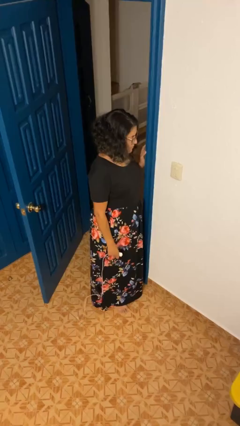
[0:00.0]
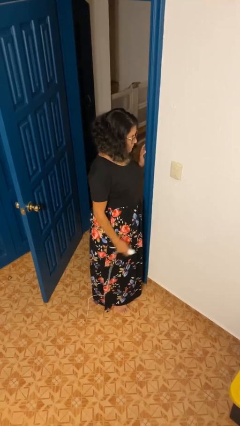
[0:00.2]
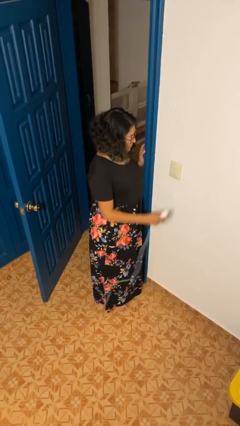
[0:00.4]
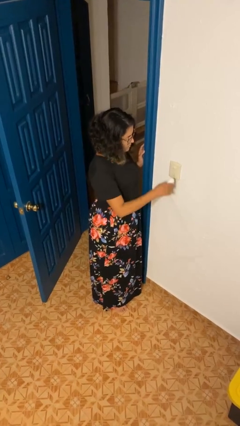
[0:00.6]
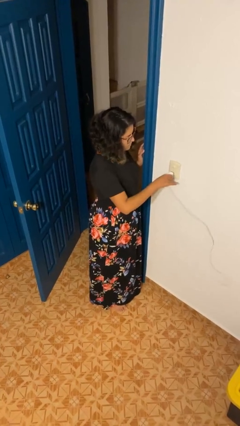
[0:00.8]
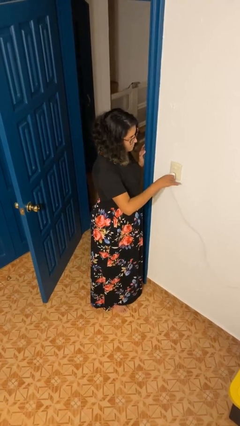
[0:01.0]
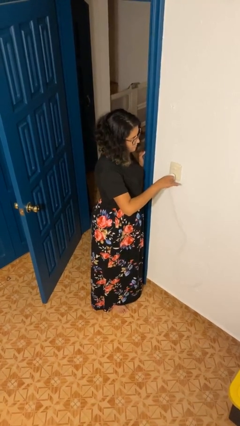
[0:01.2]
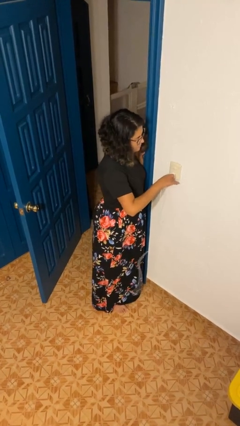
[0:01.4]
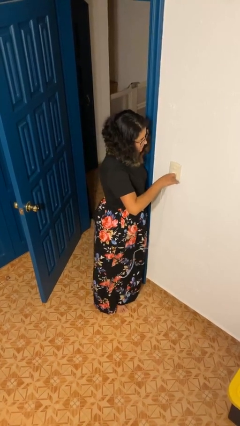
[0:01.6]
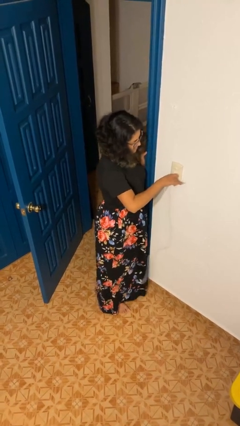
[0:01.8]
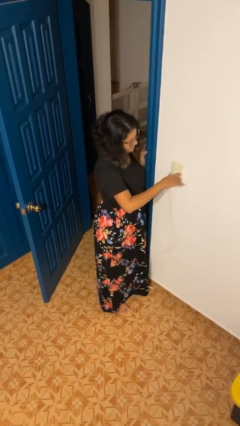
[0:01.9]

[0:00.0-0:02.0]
person plugs into electrical socket

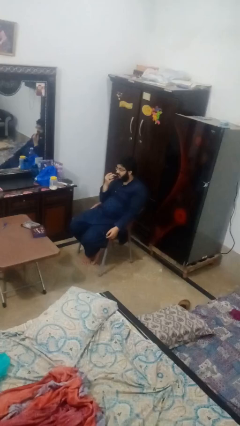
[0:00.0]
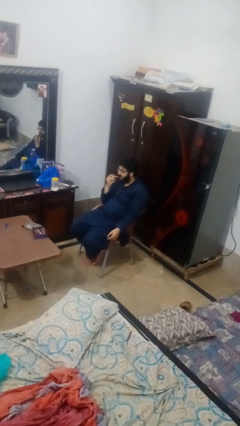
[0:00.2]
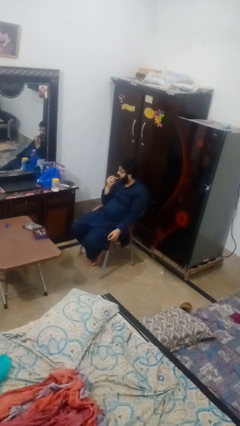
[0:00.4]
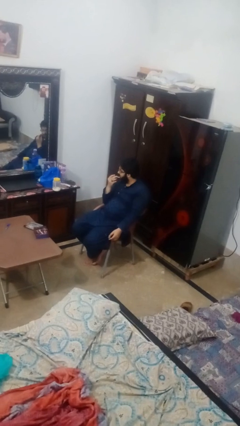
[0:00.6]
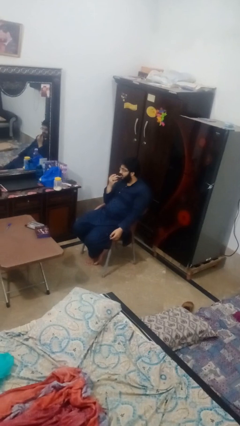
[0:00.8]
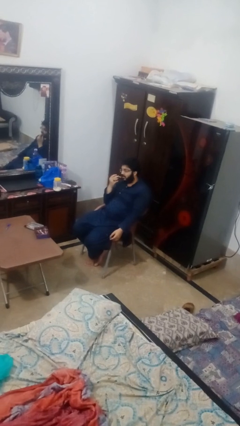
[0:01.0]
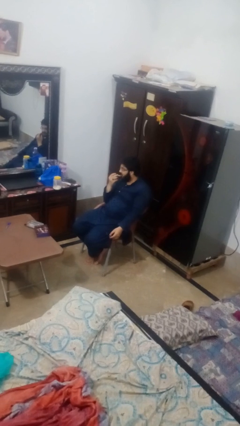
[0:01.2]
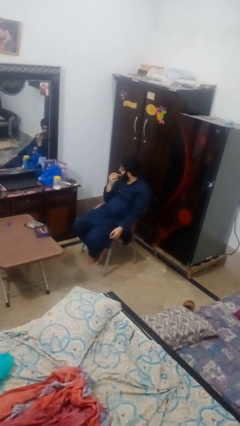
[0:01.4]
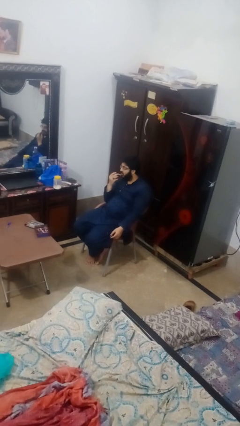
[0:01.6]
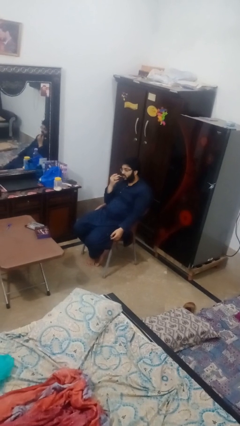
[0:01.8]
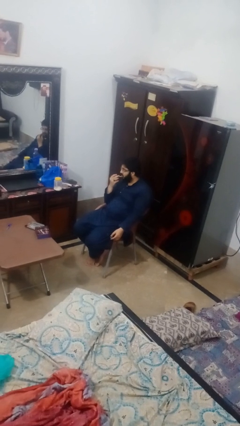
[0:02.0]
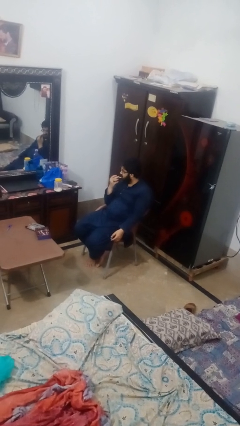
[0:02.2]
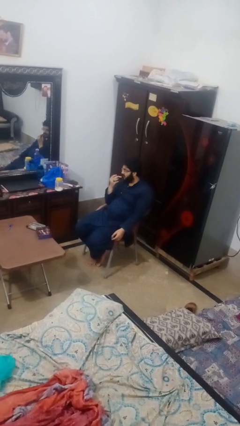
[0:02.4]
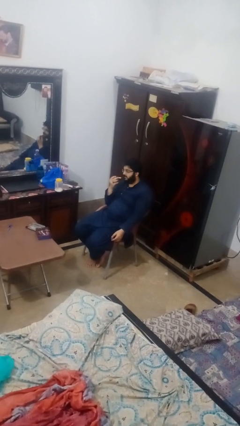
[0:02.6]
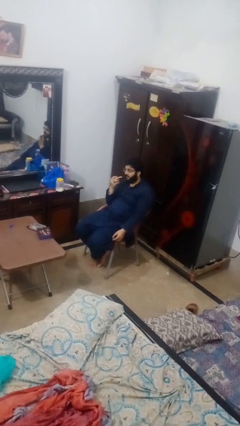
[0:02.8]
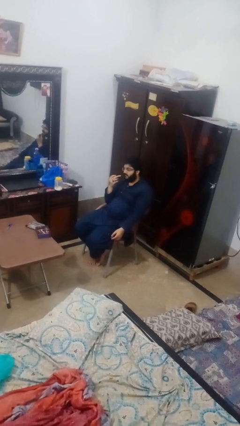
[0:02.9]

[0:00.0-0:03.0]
person applies lip makeup

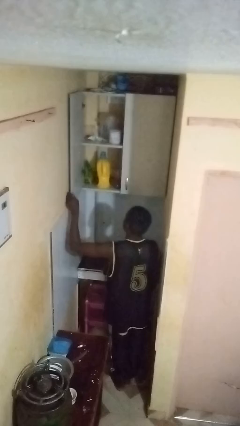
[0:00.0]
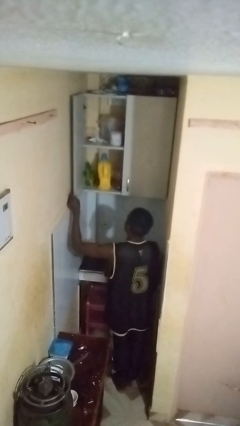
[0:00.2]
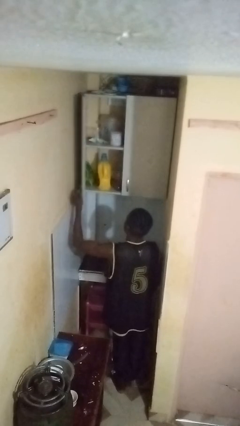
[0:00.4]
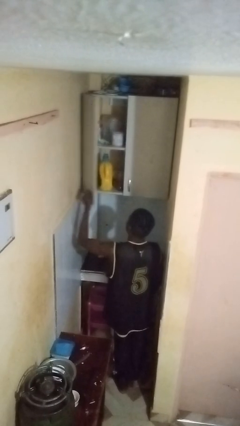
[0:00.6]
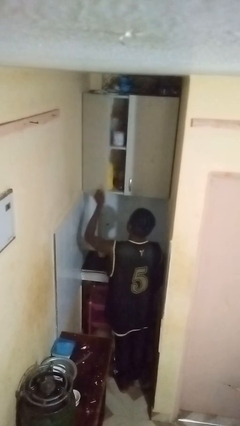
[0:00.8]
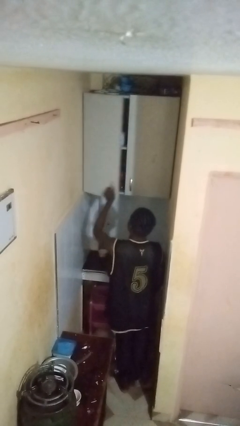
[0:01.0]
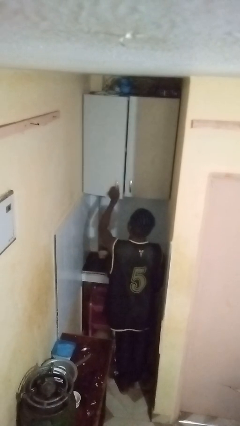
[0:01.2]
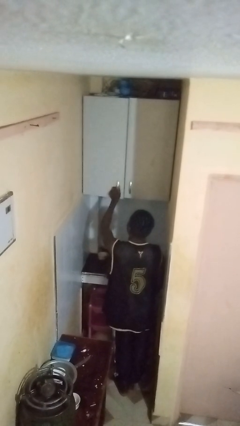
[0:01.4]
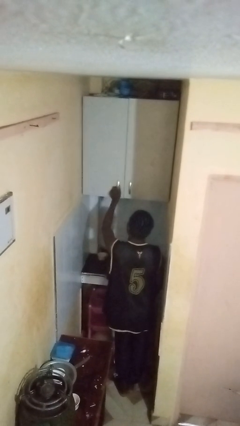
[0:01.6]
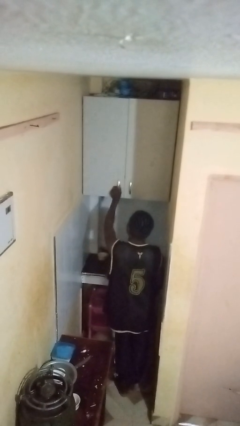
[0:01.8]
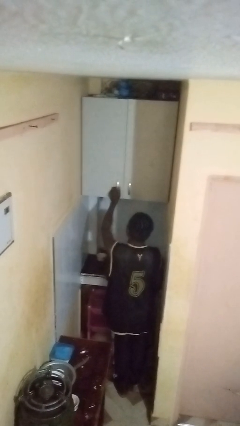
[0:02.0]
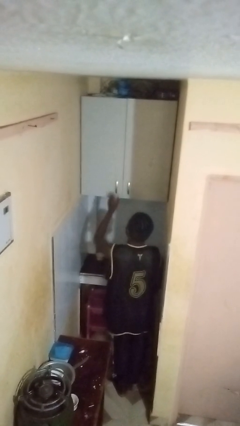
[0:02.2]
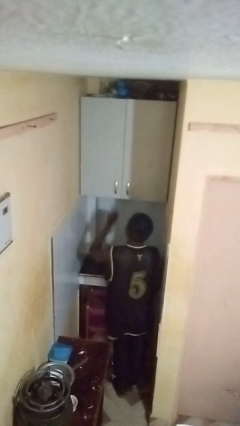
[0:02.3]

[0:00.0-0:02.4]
person closes cabinet

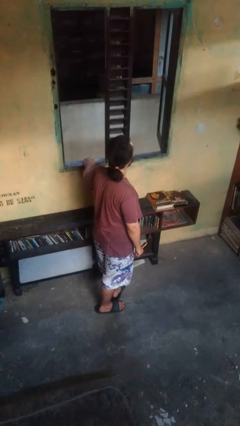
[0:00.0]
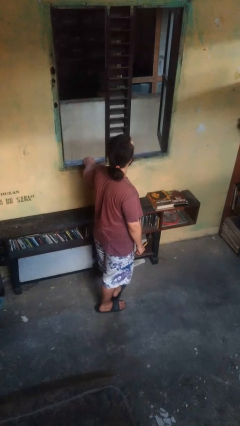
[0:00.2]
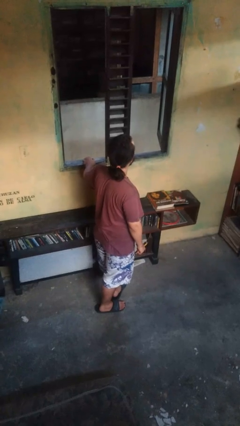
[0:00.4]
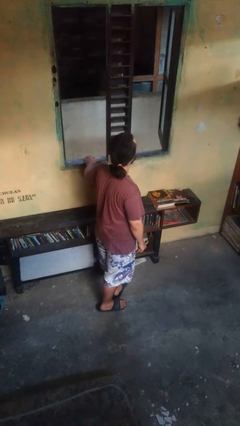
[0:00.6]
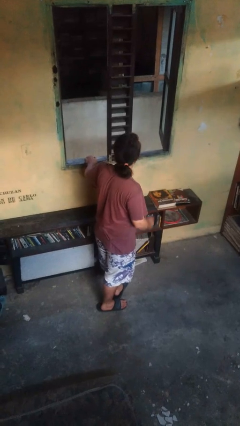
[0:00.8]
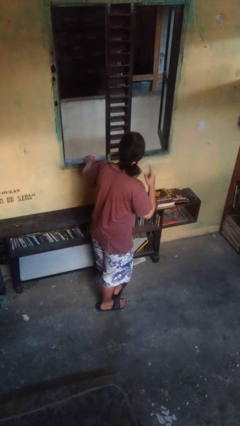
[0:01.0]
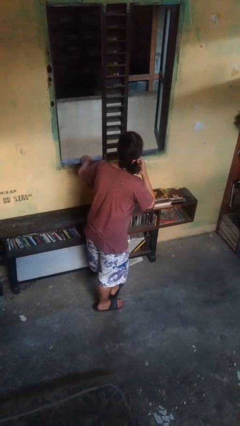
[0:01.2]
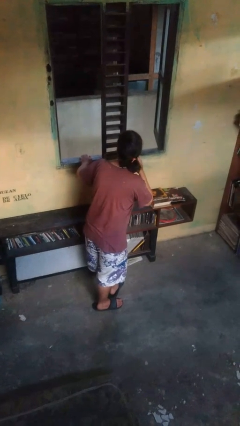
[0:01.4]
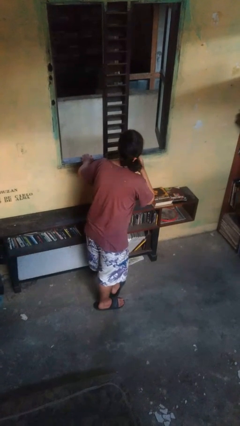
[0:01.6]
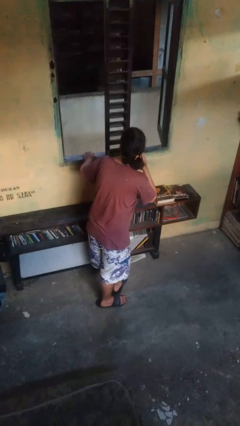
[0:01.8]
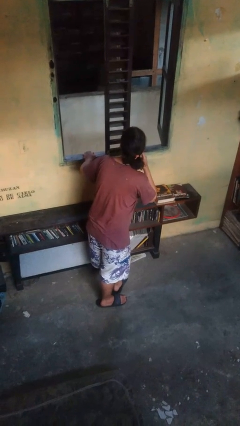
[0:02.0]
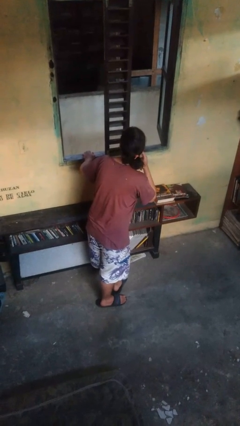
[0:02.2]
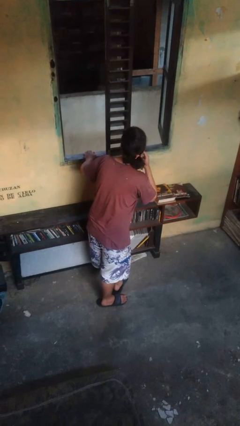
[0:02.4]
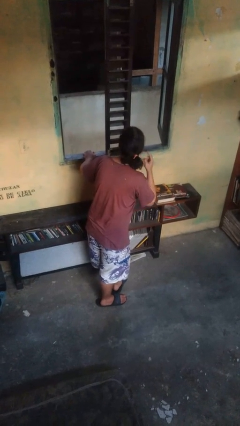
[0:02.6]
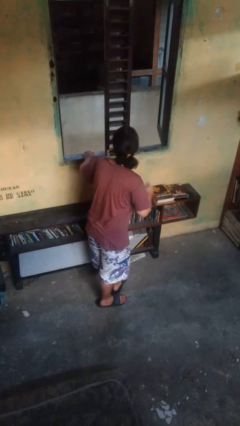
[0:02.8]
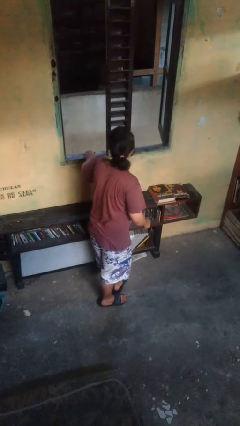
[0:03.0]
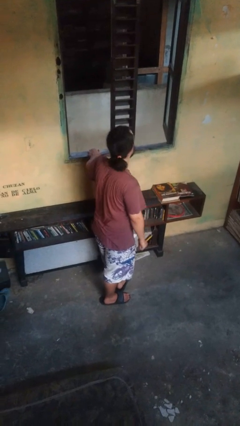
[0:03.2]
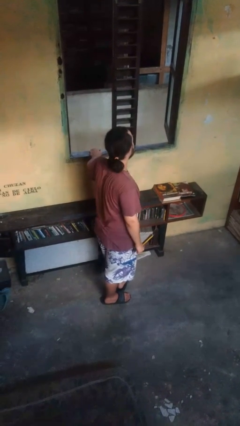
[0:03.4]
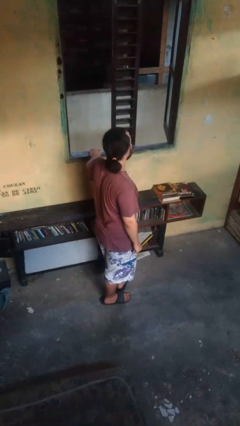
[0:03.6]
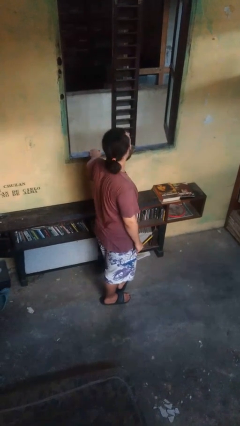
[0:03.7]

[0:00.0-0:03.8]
person gestures listen closely

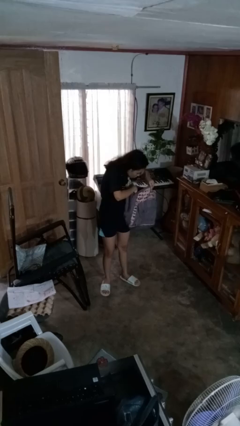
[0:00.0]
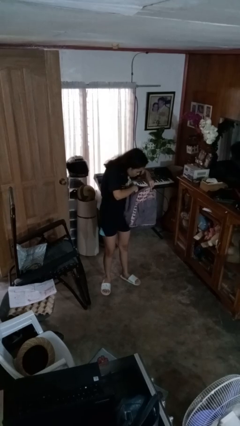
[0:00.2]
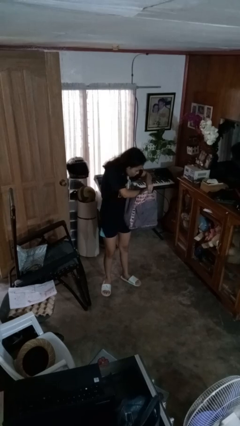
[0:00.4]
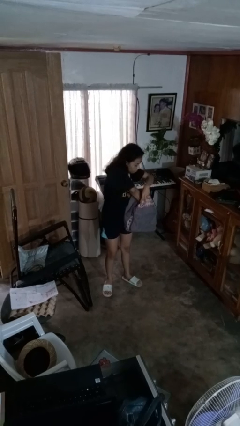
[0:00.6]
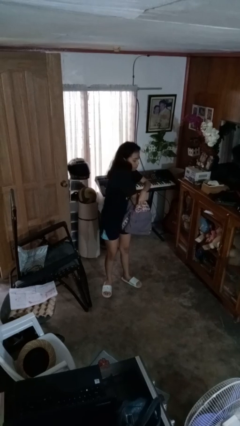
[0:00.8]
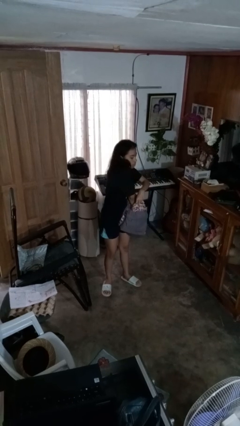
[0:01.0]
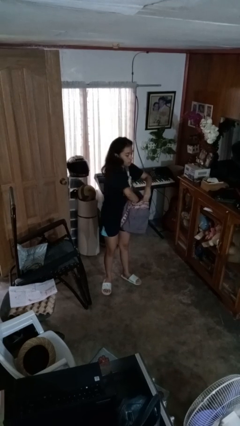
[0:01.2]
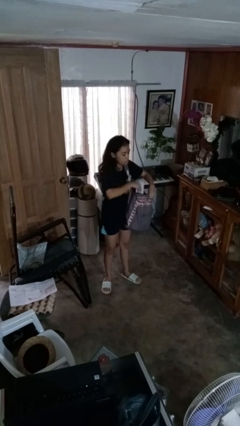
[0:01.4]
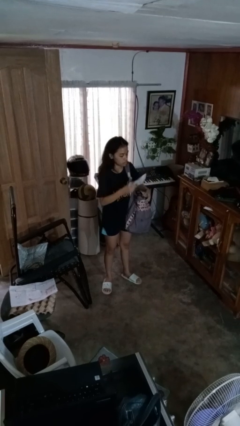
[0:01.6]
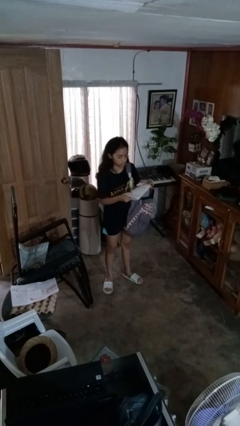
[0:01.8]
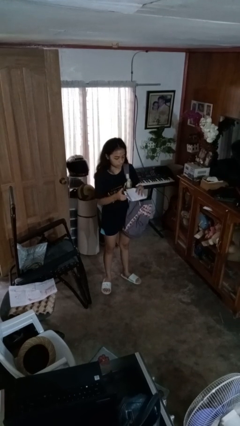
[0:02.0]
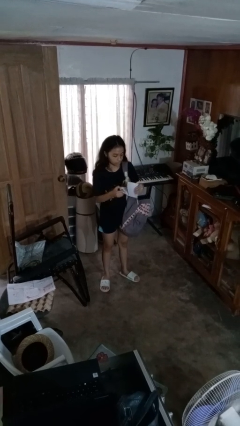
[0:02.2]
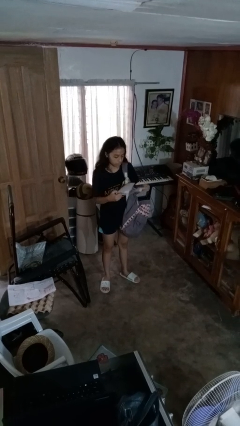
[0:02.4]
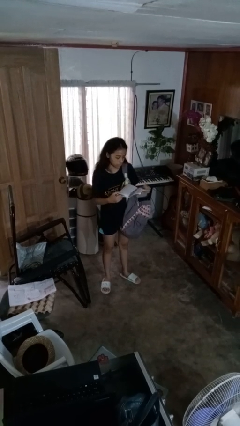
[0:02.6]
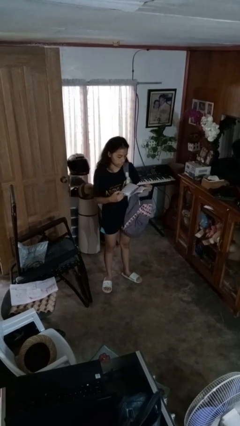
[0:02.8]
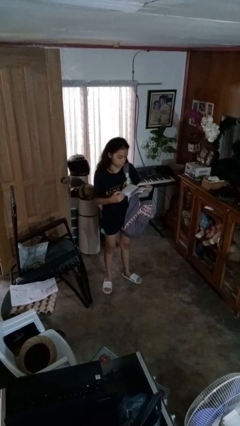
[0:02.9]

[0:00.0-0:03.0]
person takes object from backpack

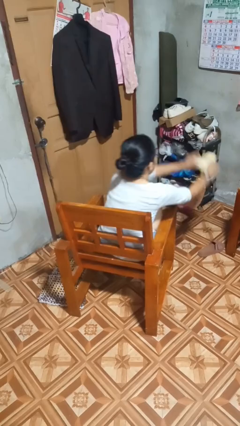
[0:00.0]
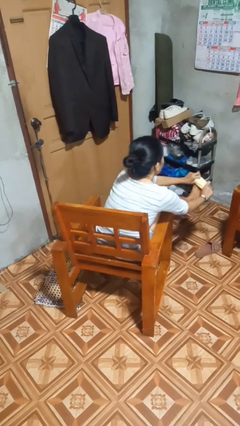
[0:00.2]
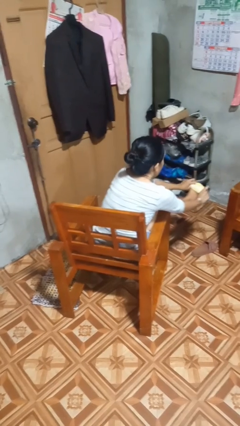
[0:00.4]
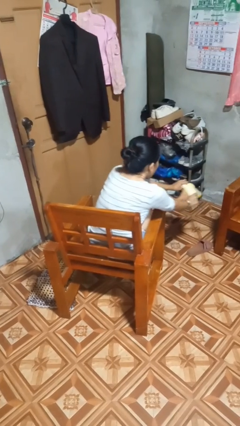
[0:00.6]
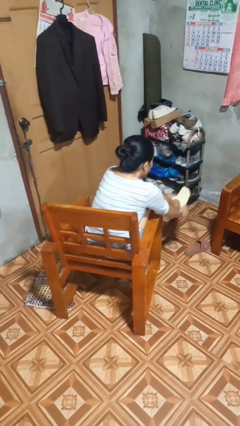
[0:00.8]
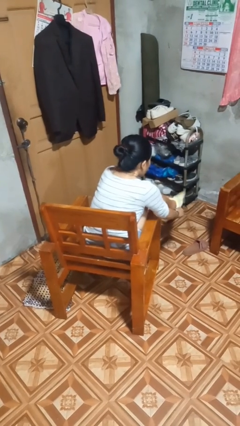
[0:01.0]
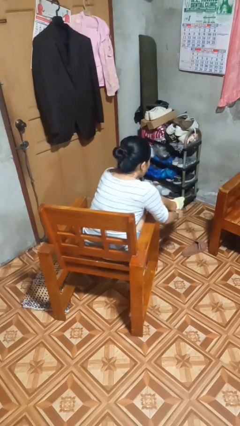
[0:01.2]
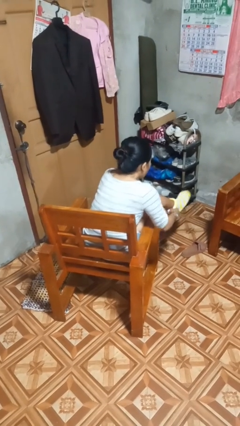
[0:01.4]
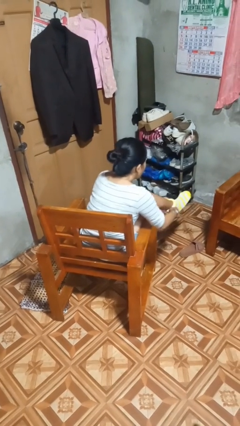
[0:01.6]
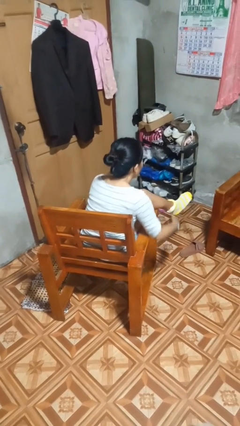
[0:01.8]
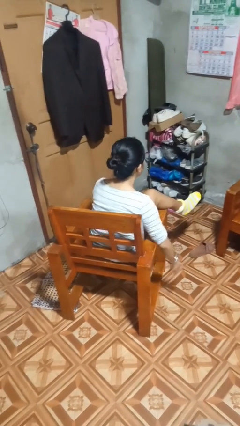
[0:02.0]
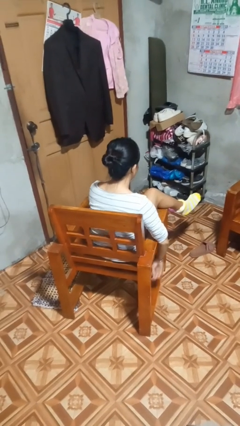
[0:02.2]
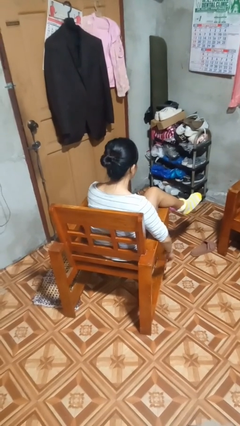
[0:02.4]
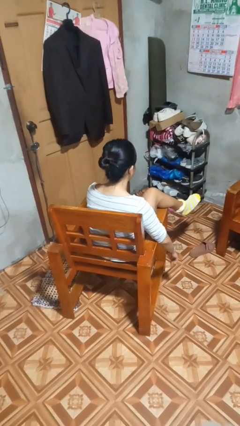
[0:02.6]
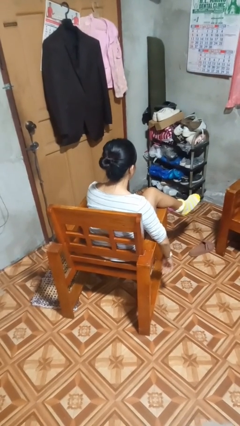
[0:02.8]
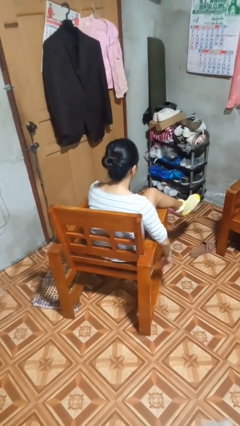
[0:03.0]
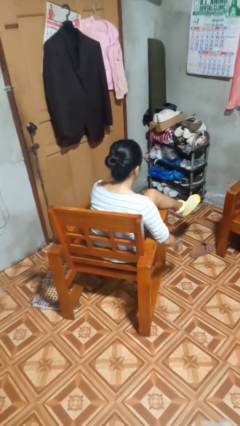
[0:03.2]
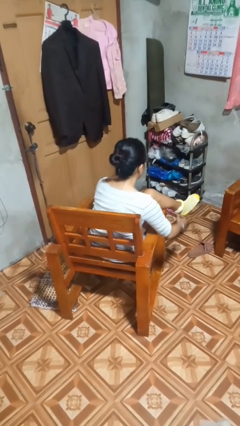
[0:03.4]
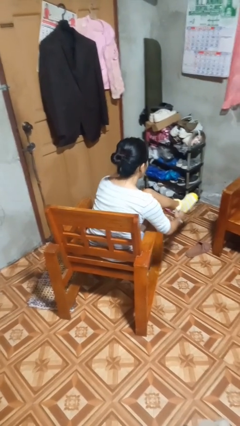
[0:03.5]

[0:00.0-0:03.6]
person puts on socks

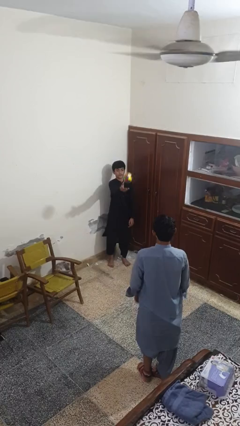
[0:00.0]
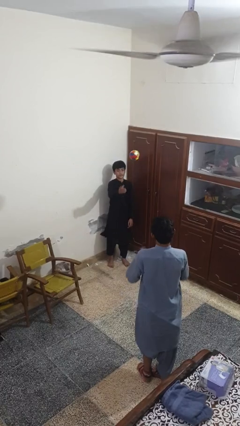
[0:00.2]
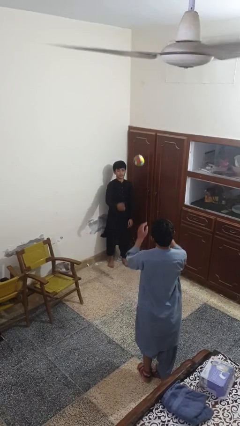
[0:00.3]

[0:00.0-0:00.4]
person throws object to person
